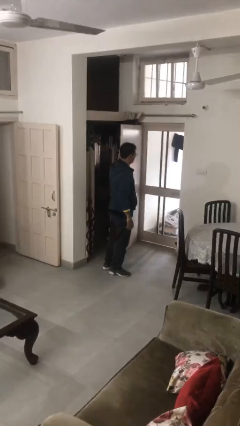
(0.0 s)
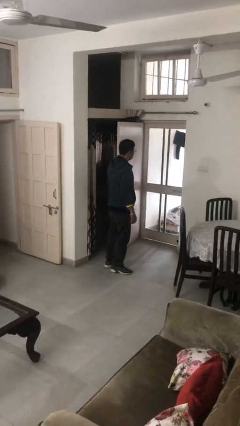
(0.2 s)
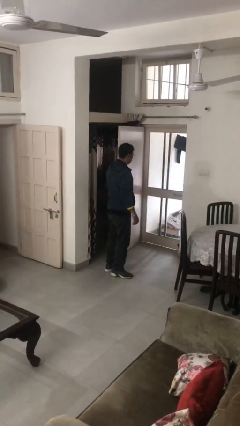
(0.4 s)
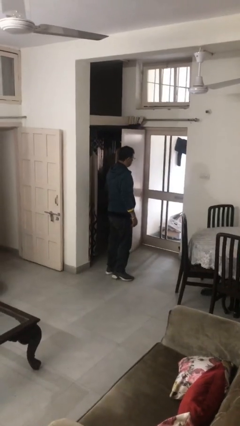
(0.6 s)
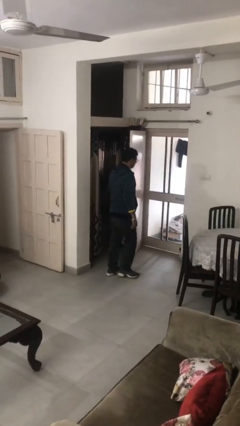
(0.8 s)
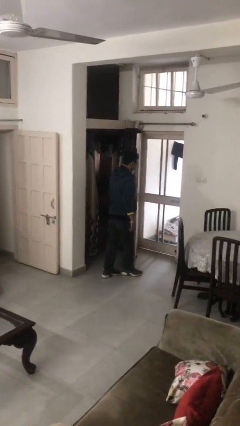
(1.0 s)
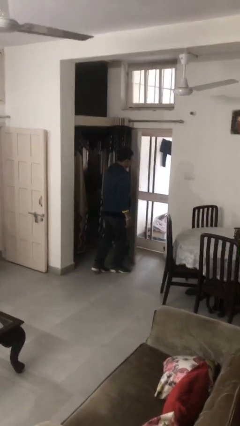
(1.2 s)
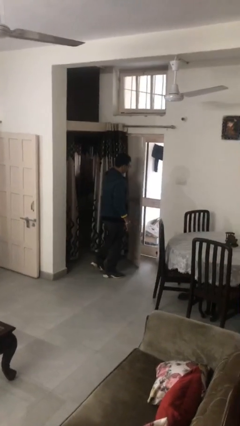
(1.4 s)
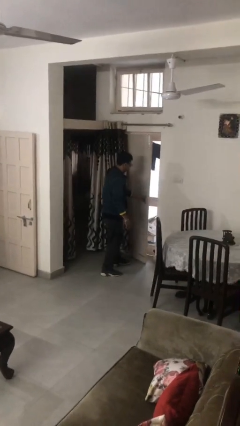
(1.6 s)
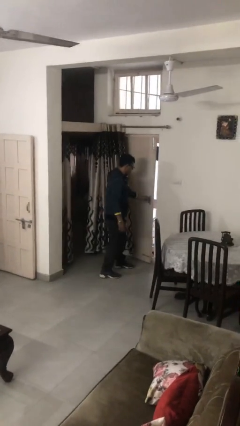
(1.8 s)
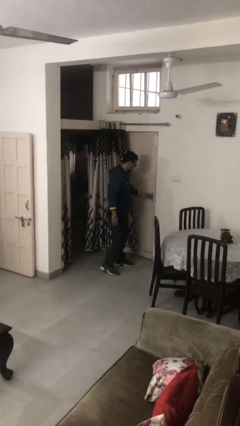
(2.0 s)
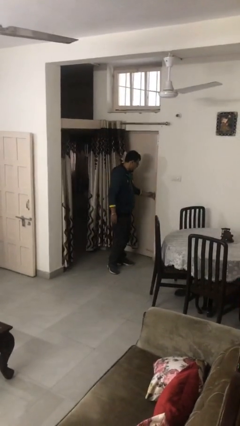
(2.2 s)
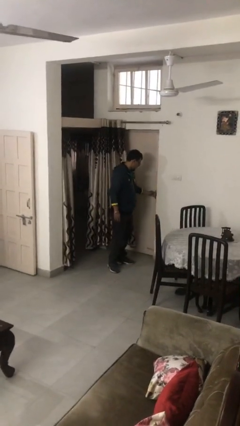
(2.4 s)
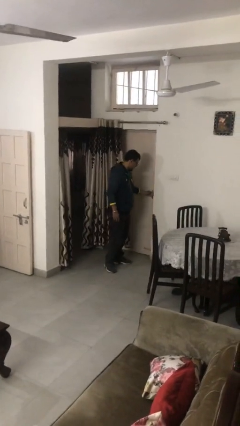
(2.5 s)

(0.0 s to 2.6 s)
person closes facility door

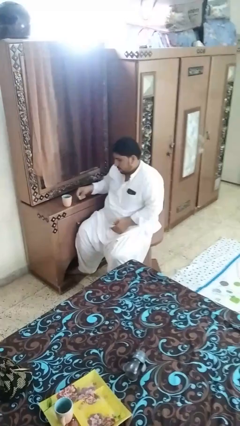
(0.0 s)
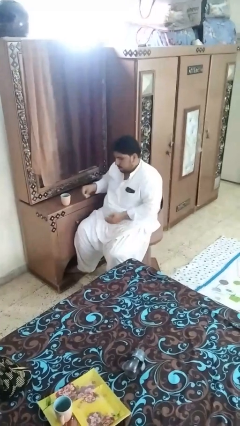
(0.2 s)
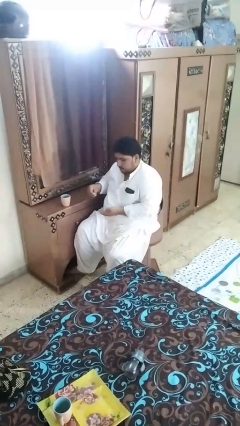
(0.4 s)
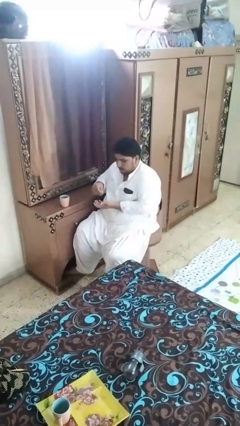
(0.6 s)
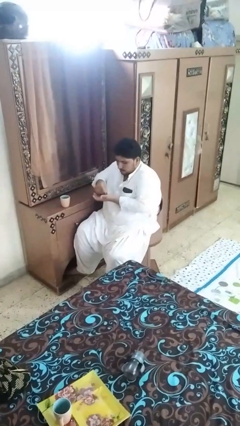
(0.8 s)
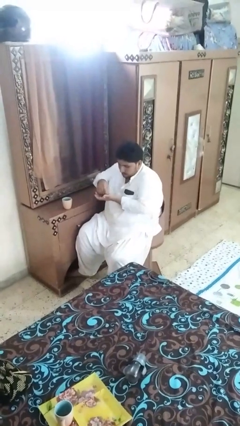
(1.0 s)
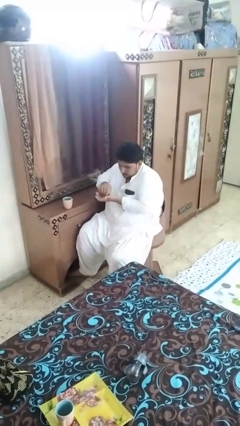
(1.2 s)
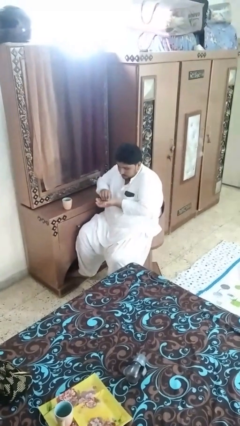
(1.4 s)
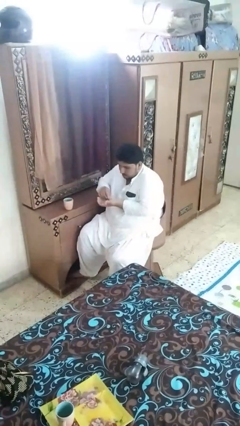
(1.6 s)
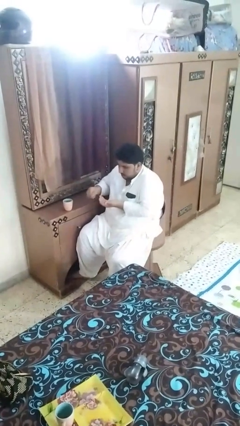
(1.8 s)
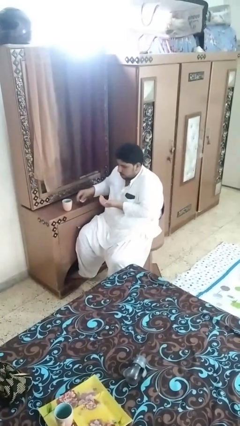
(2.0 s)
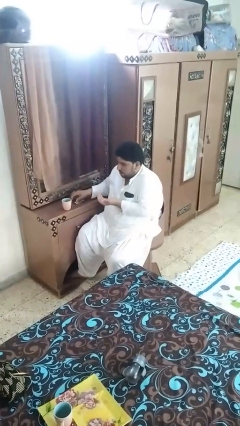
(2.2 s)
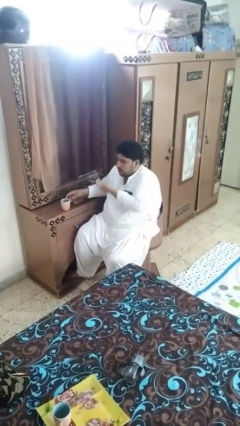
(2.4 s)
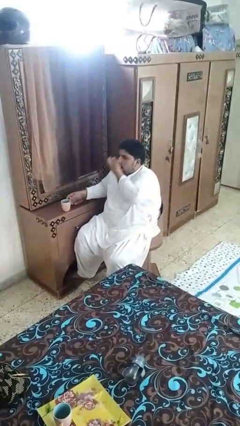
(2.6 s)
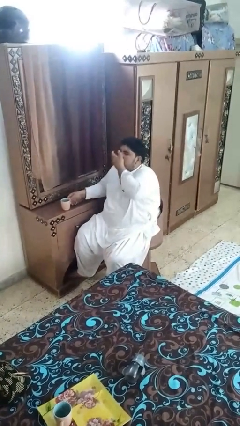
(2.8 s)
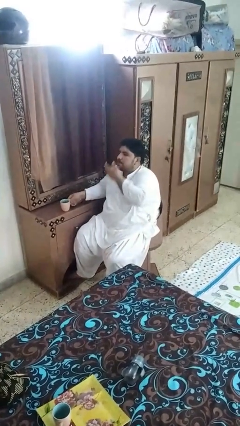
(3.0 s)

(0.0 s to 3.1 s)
person takes medicine pills

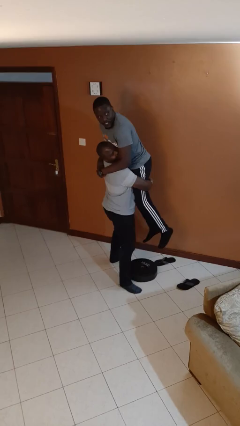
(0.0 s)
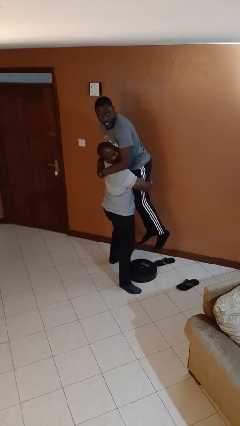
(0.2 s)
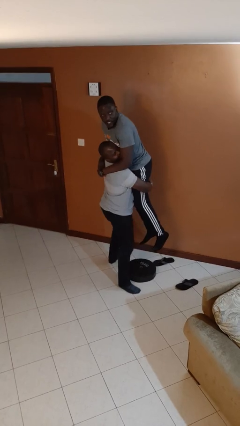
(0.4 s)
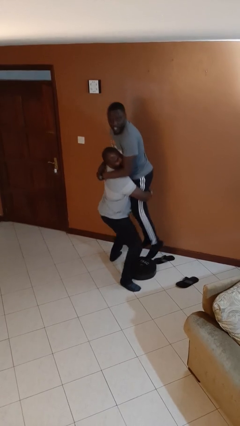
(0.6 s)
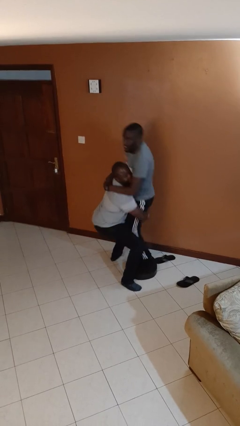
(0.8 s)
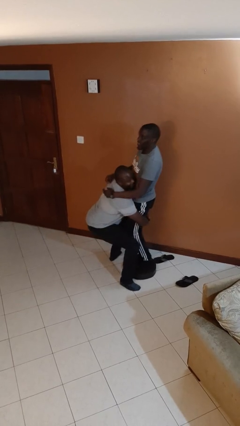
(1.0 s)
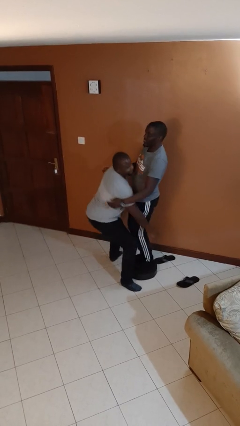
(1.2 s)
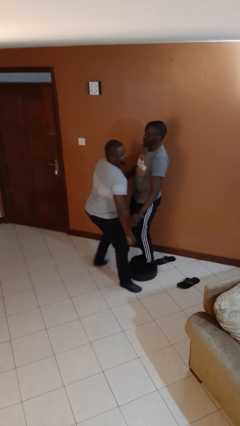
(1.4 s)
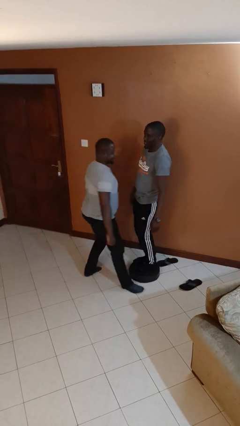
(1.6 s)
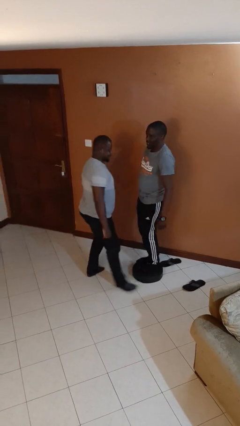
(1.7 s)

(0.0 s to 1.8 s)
person puts down person

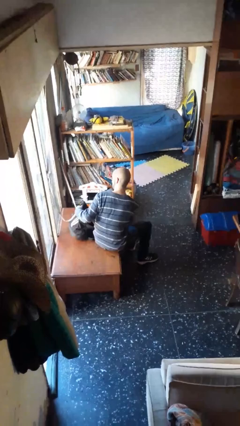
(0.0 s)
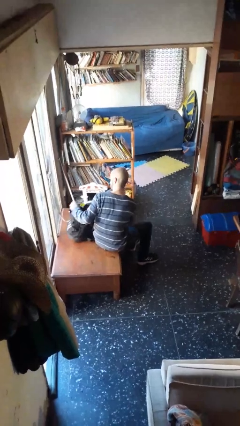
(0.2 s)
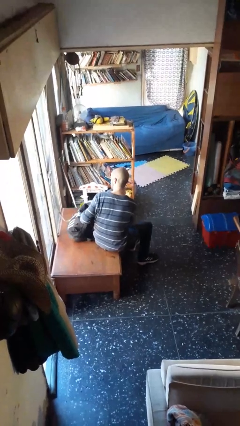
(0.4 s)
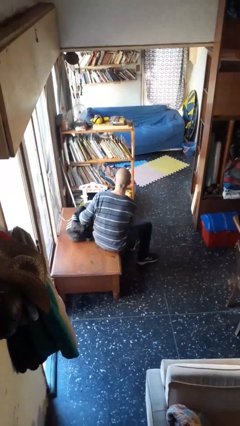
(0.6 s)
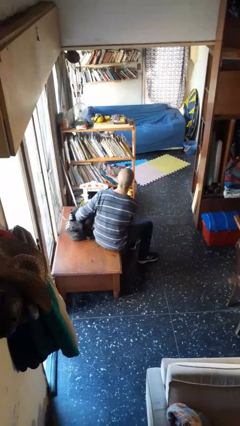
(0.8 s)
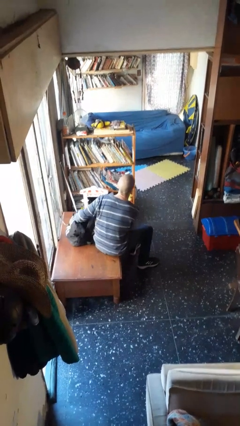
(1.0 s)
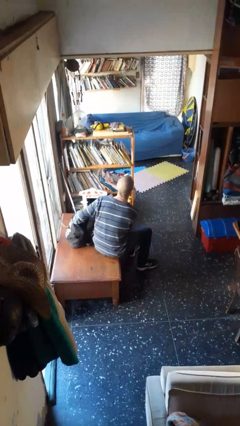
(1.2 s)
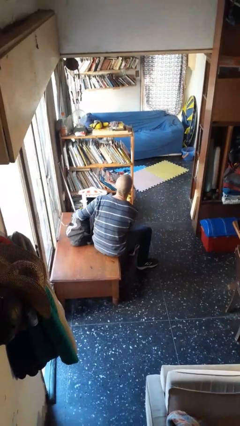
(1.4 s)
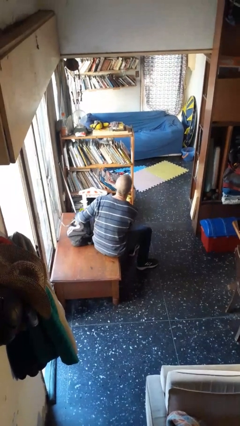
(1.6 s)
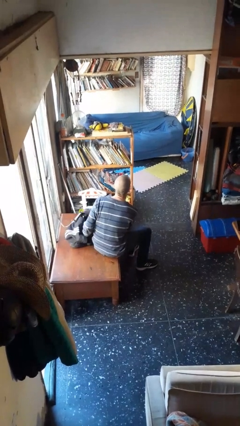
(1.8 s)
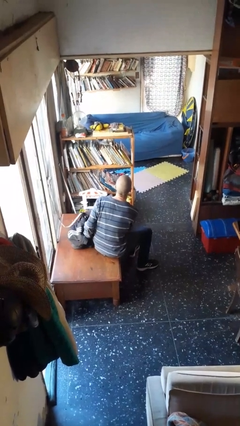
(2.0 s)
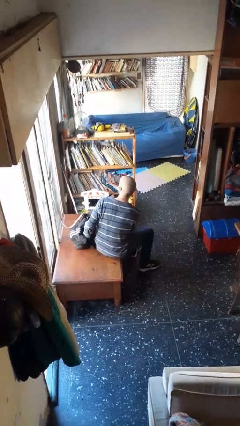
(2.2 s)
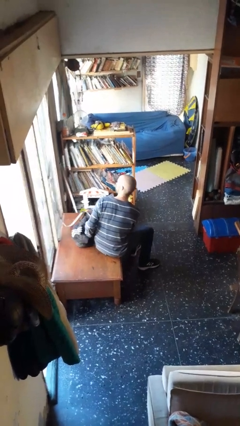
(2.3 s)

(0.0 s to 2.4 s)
person searches in backpack

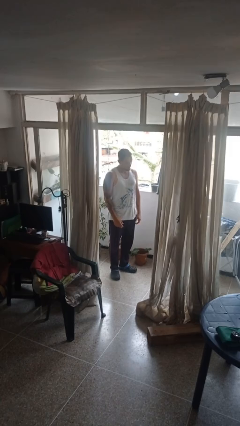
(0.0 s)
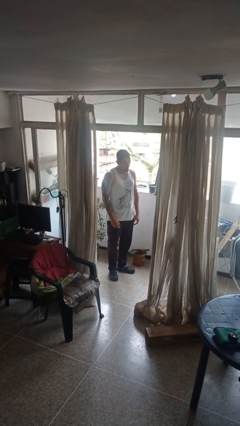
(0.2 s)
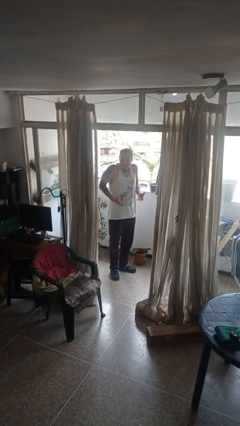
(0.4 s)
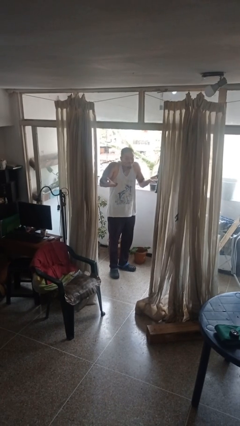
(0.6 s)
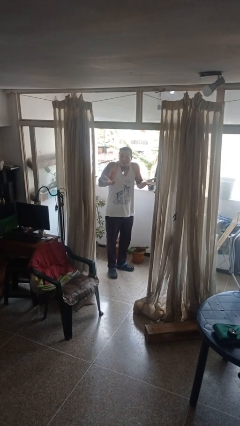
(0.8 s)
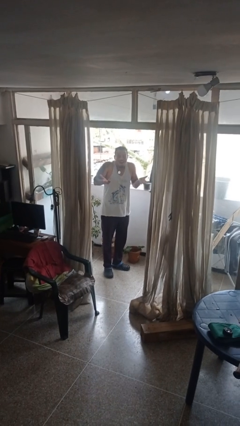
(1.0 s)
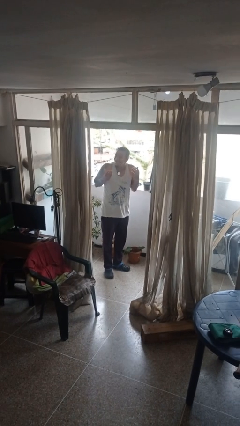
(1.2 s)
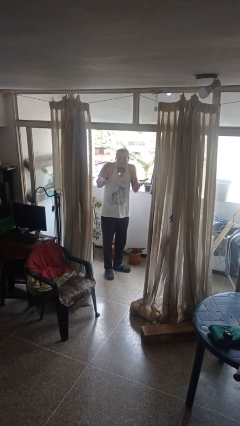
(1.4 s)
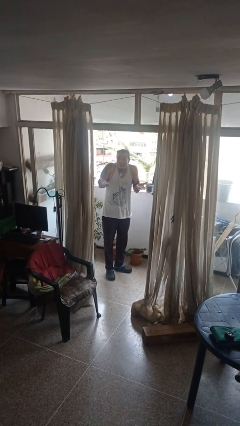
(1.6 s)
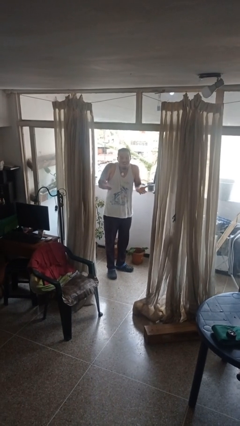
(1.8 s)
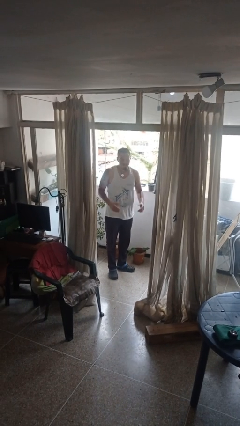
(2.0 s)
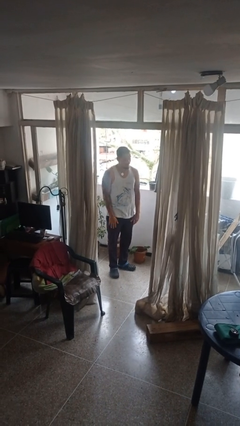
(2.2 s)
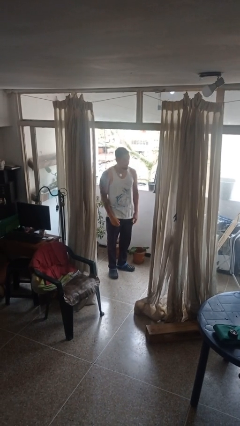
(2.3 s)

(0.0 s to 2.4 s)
person shrugs

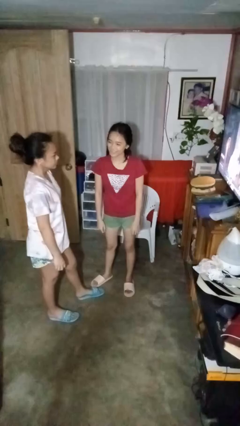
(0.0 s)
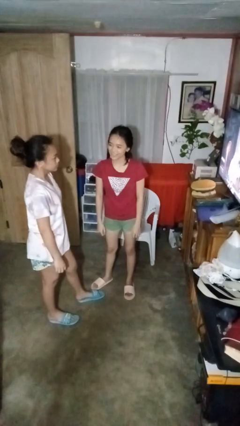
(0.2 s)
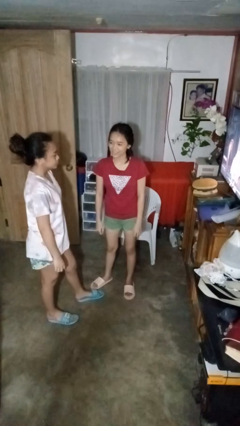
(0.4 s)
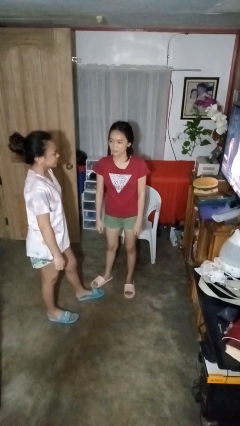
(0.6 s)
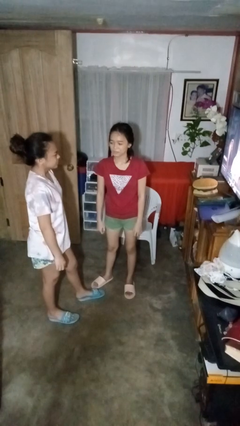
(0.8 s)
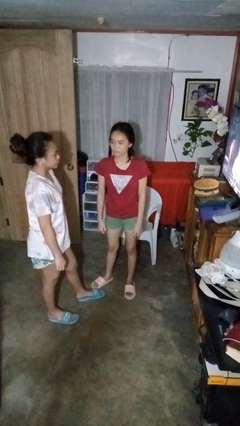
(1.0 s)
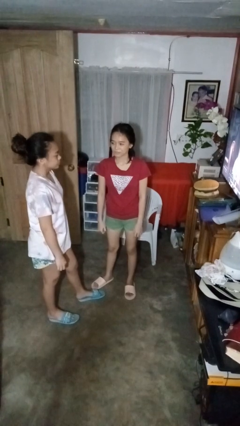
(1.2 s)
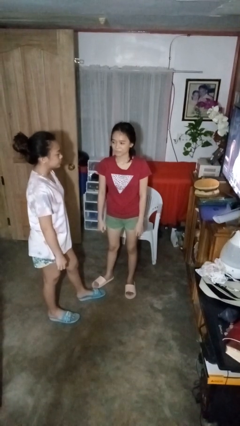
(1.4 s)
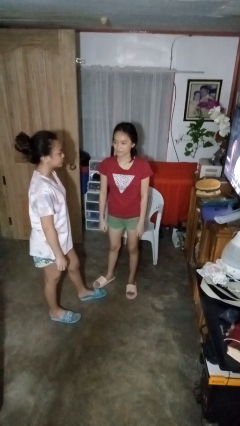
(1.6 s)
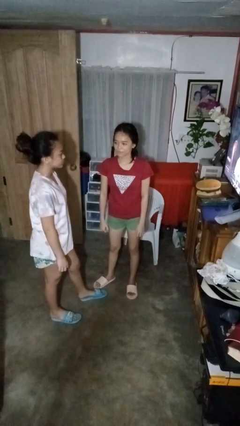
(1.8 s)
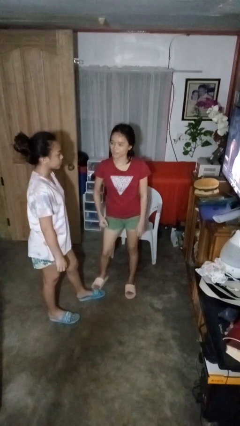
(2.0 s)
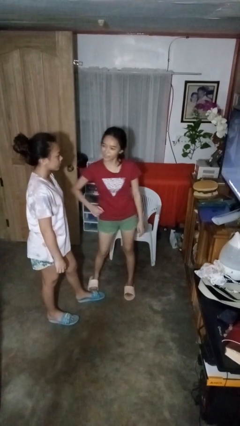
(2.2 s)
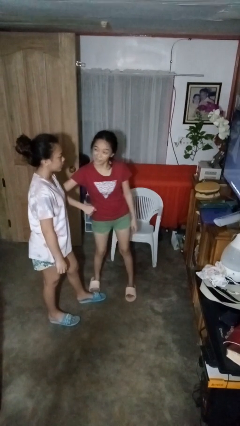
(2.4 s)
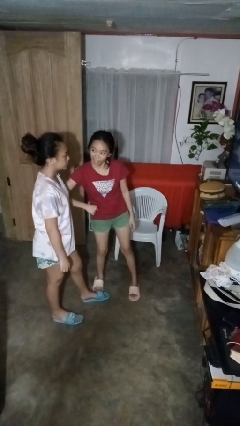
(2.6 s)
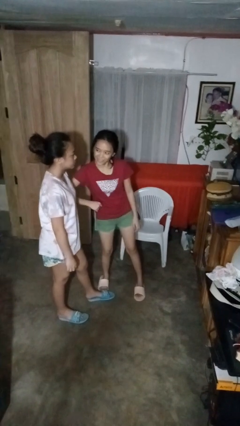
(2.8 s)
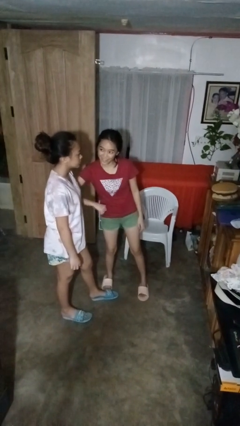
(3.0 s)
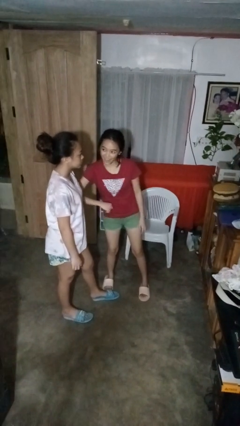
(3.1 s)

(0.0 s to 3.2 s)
person nudges person with elbow

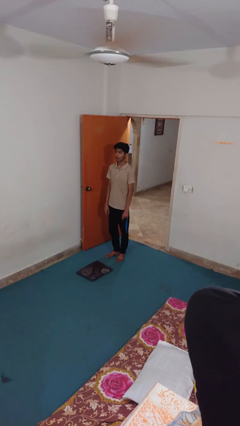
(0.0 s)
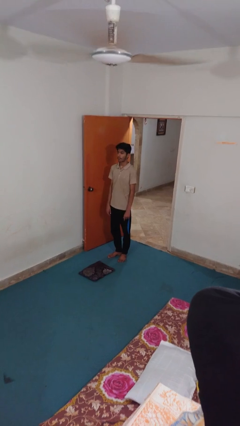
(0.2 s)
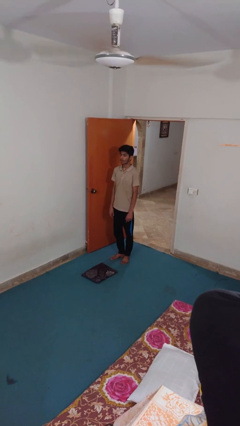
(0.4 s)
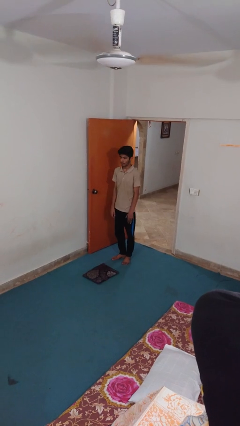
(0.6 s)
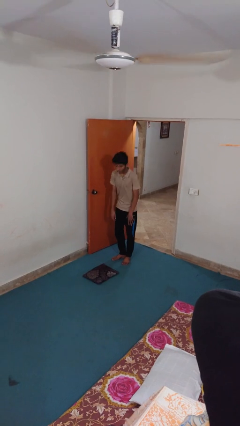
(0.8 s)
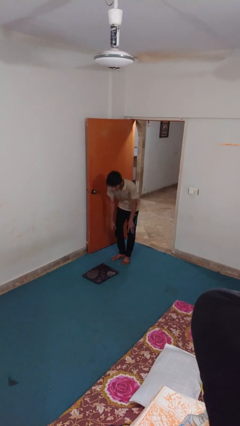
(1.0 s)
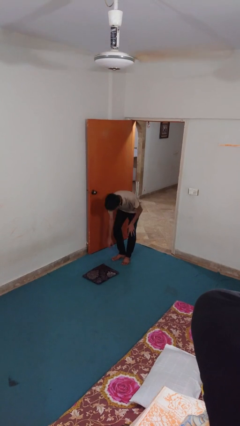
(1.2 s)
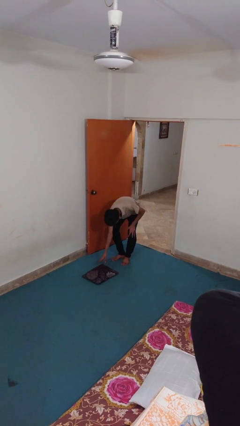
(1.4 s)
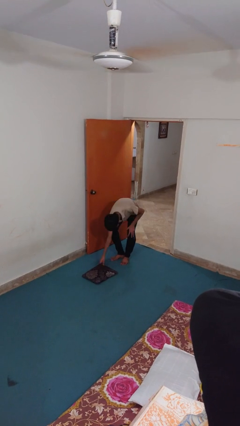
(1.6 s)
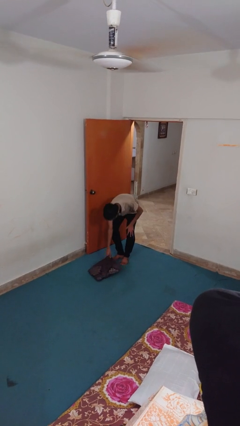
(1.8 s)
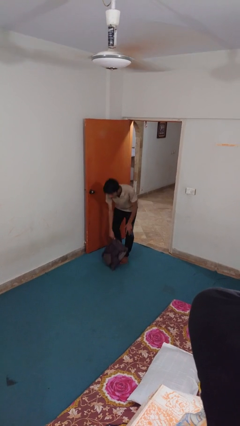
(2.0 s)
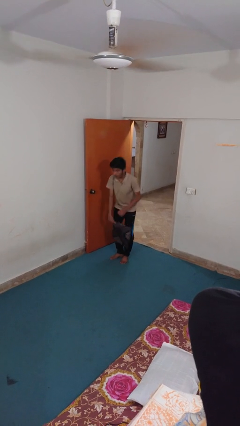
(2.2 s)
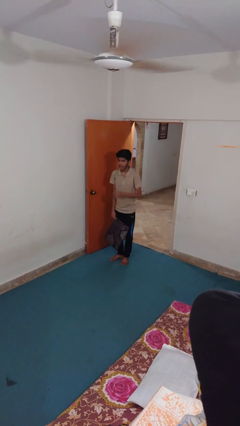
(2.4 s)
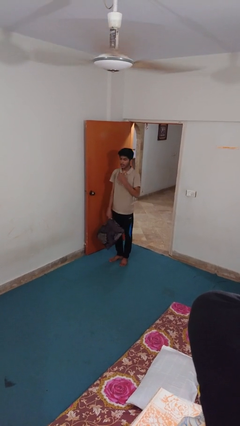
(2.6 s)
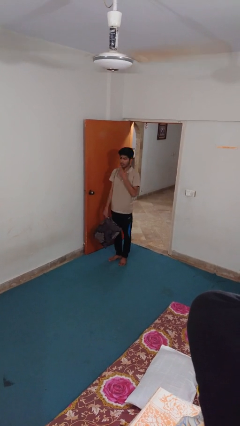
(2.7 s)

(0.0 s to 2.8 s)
person picks up object from floor
